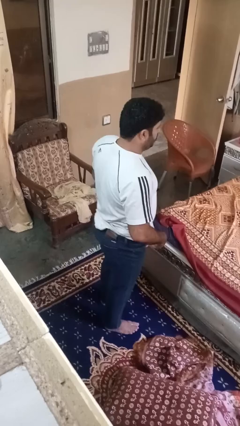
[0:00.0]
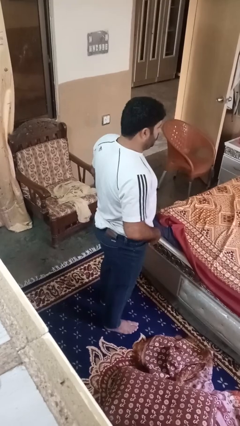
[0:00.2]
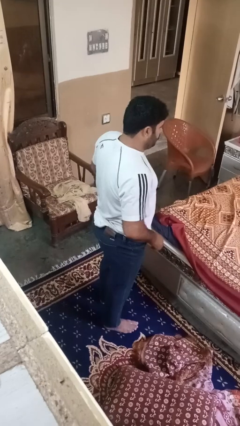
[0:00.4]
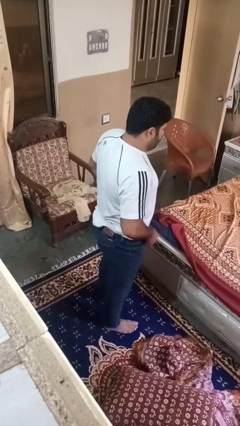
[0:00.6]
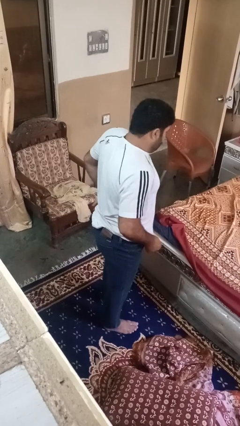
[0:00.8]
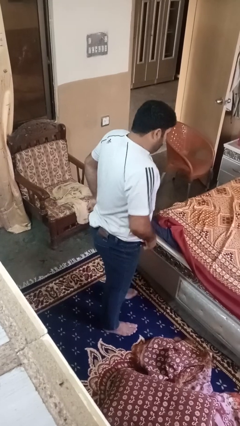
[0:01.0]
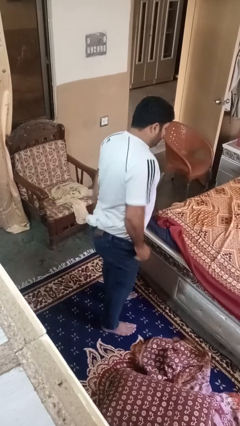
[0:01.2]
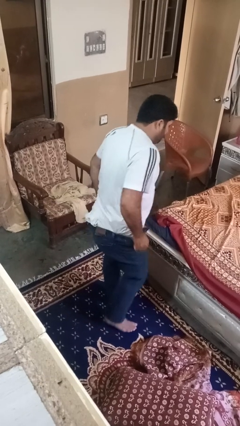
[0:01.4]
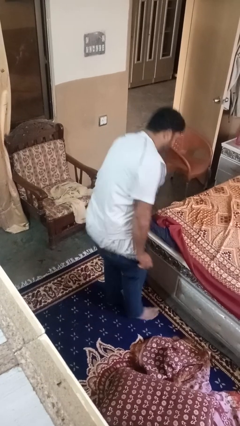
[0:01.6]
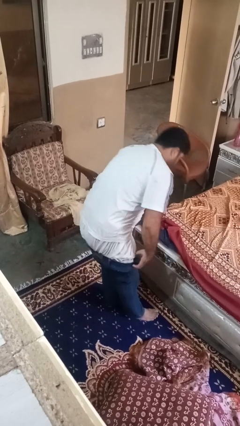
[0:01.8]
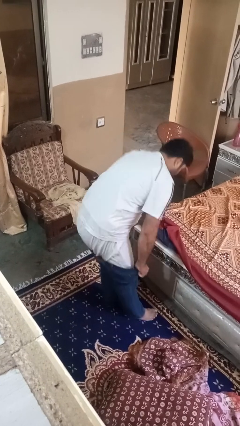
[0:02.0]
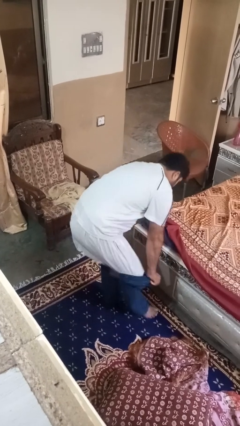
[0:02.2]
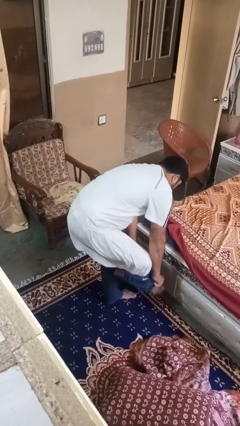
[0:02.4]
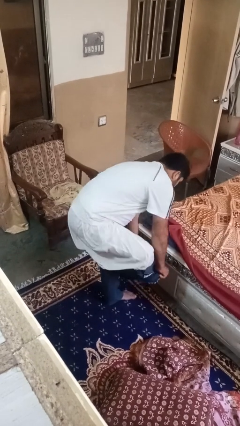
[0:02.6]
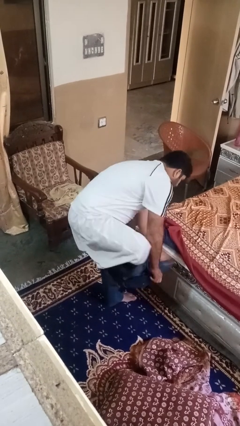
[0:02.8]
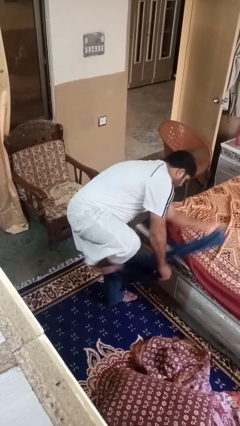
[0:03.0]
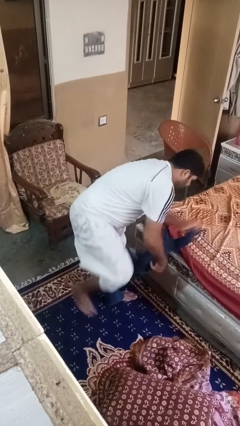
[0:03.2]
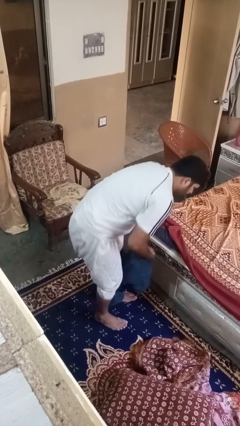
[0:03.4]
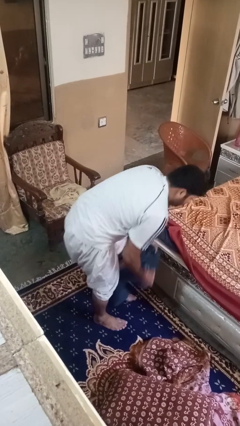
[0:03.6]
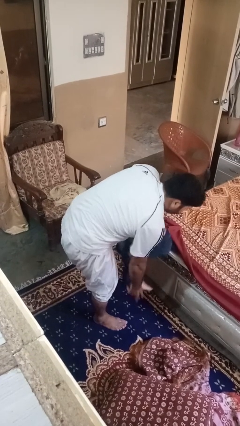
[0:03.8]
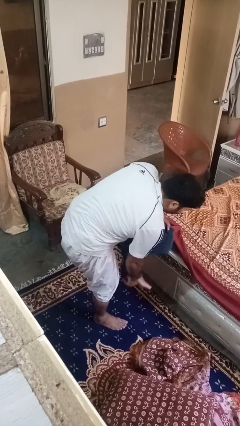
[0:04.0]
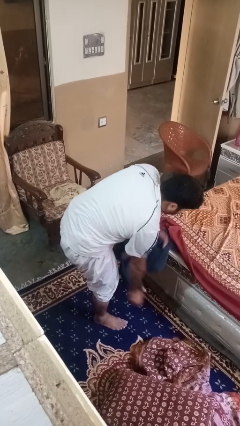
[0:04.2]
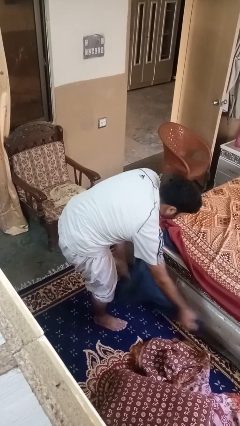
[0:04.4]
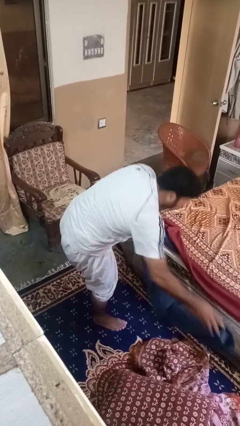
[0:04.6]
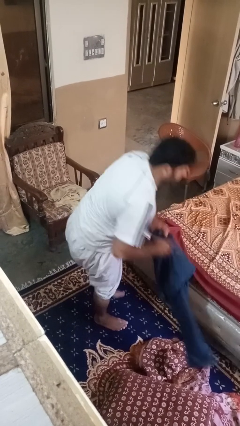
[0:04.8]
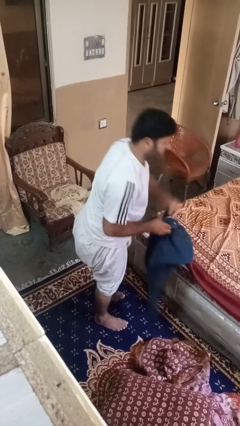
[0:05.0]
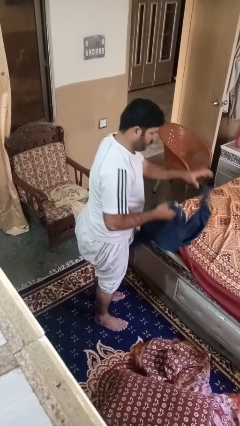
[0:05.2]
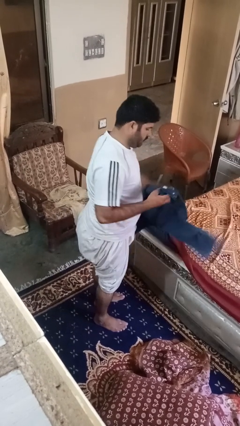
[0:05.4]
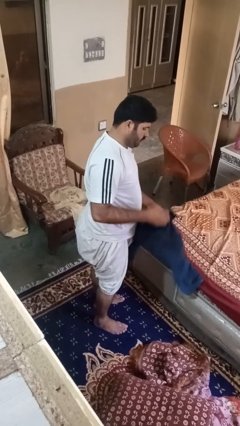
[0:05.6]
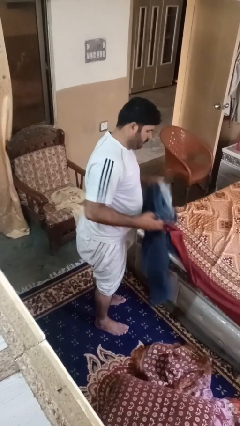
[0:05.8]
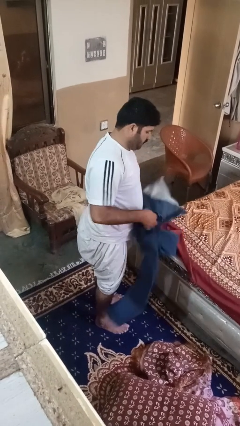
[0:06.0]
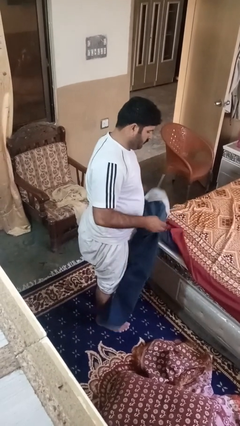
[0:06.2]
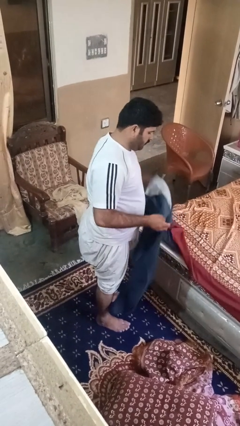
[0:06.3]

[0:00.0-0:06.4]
person takes off pants

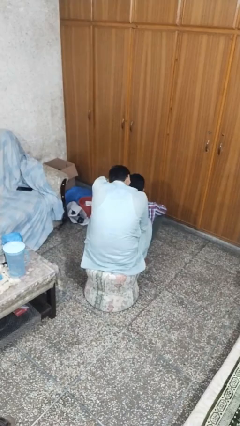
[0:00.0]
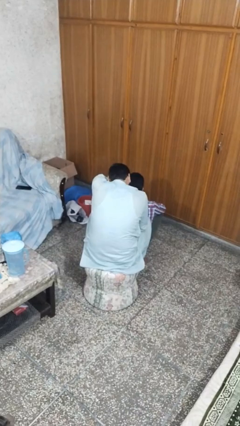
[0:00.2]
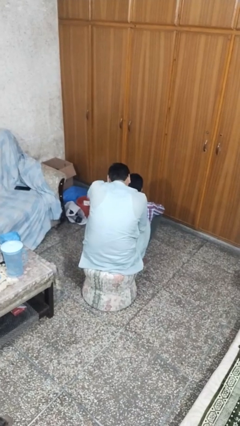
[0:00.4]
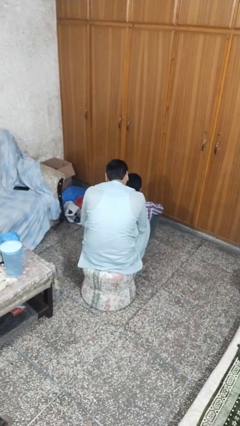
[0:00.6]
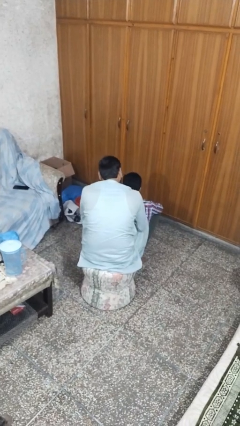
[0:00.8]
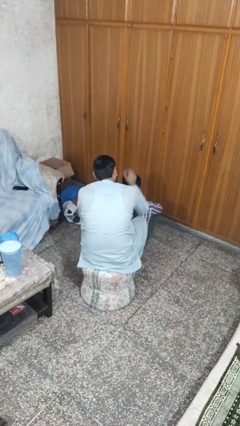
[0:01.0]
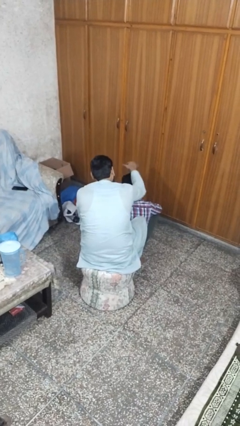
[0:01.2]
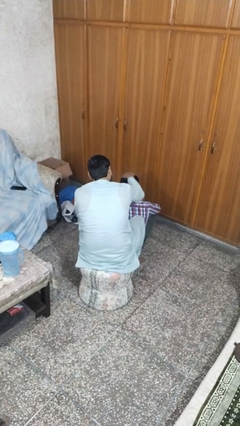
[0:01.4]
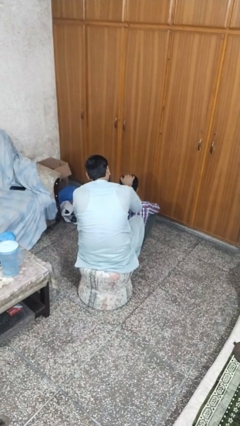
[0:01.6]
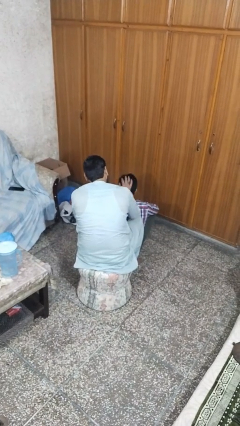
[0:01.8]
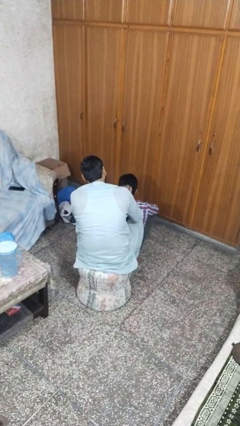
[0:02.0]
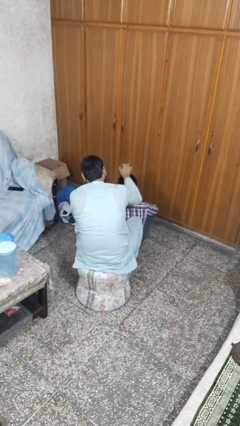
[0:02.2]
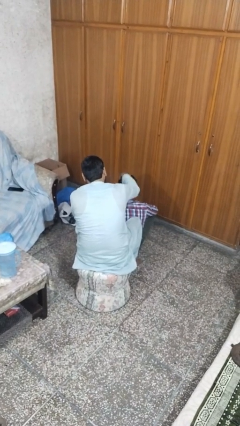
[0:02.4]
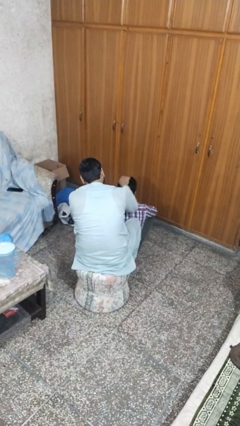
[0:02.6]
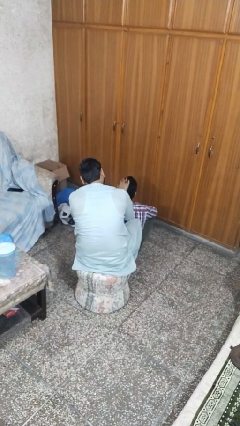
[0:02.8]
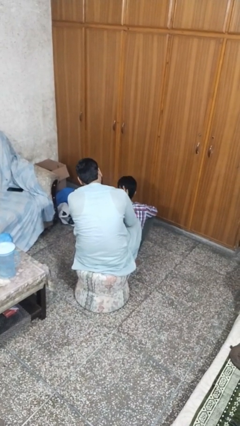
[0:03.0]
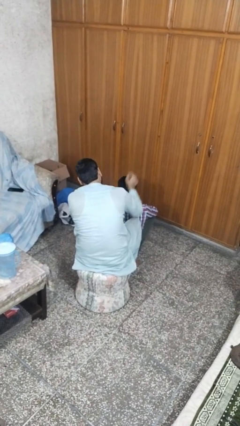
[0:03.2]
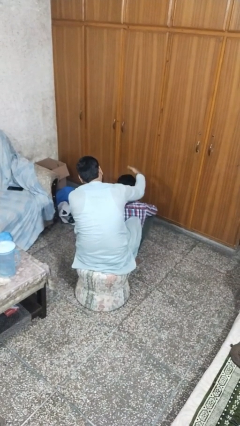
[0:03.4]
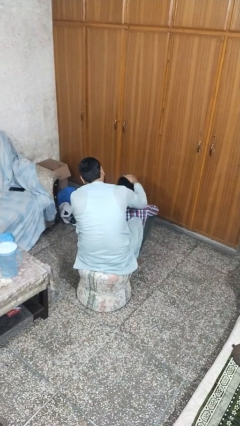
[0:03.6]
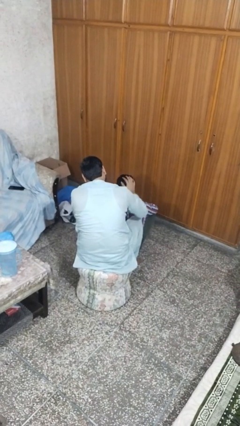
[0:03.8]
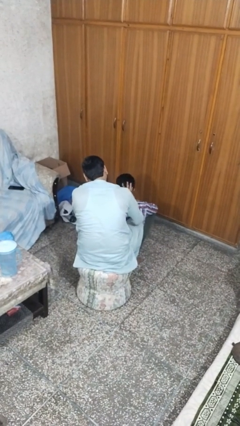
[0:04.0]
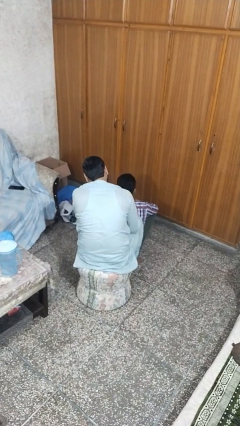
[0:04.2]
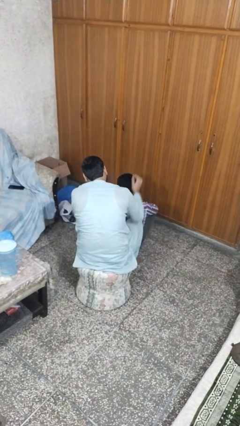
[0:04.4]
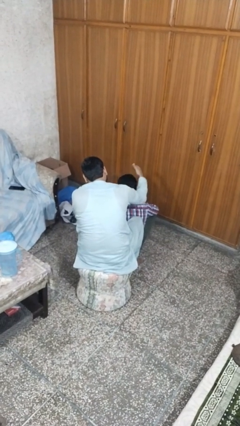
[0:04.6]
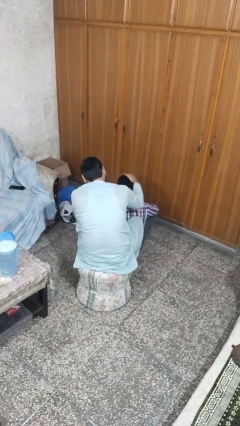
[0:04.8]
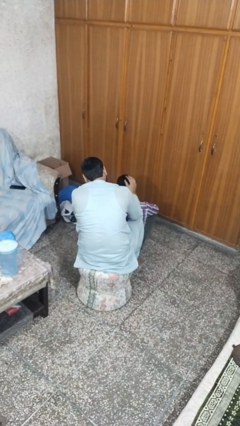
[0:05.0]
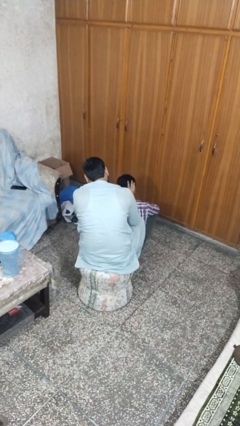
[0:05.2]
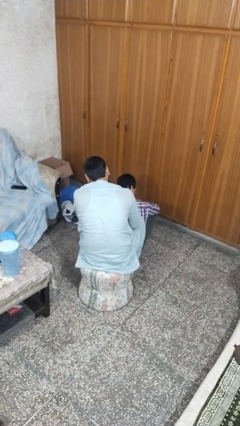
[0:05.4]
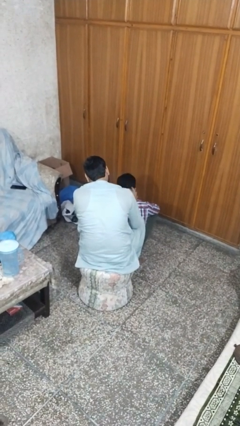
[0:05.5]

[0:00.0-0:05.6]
person braids hair of person

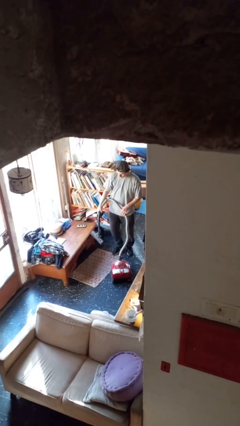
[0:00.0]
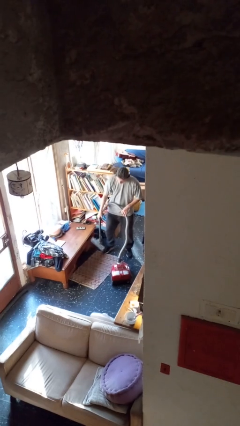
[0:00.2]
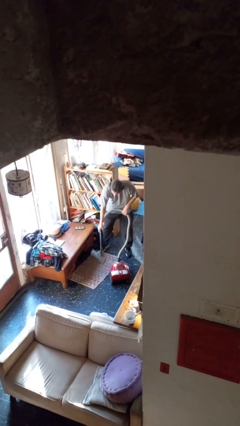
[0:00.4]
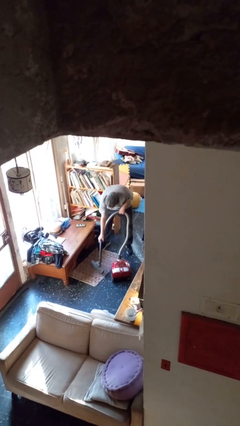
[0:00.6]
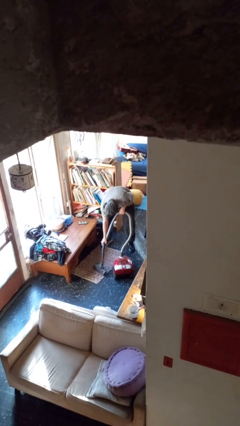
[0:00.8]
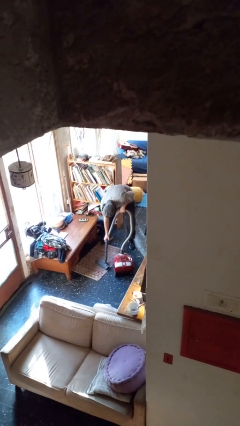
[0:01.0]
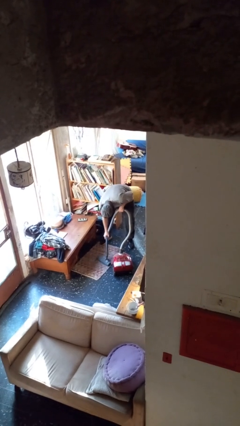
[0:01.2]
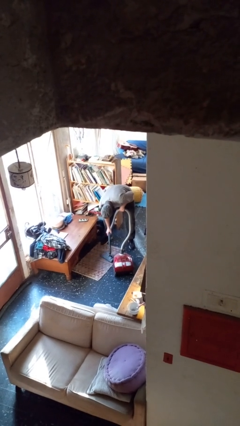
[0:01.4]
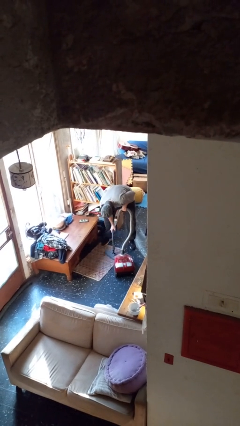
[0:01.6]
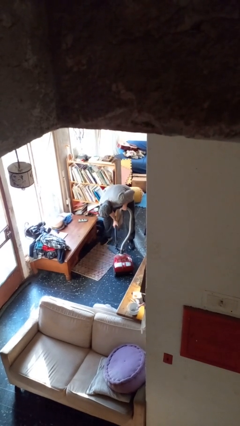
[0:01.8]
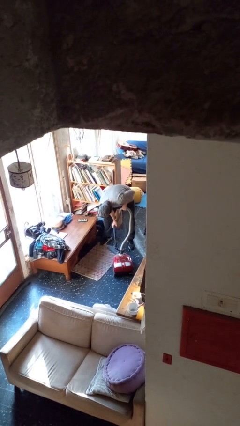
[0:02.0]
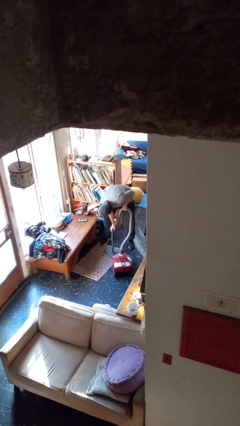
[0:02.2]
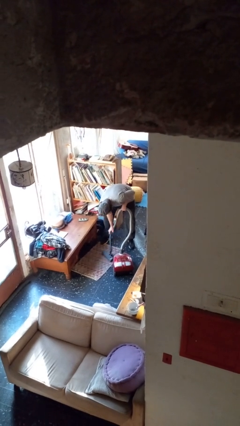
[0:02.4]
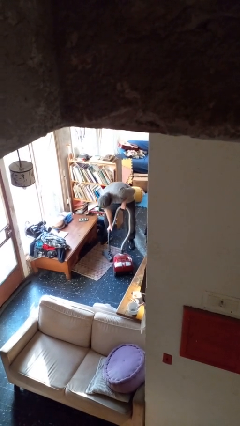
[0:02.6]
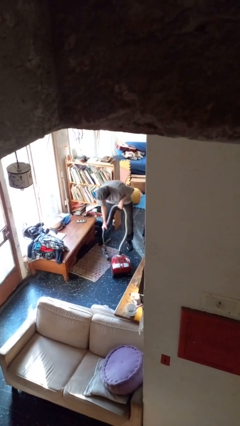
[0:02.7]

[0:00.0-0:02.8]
person vacuums carpet

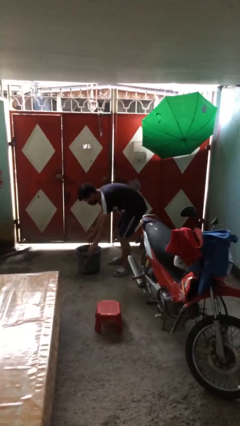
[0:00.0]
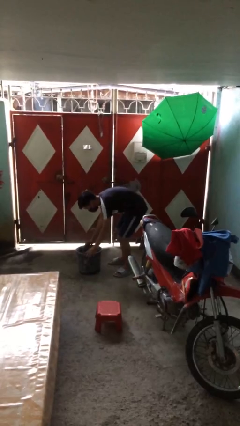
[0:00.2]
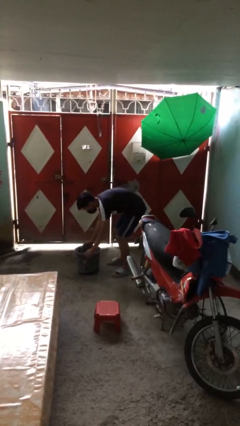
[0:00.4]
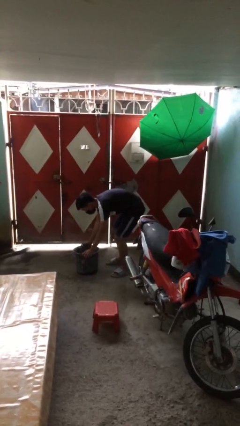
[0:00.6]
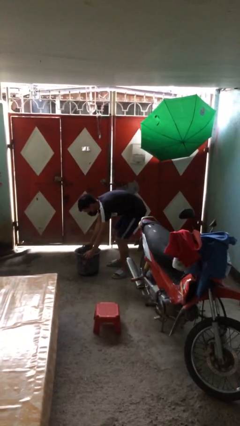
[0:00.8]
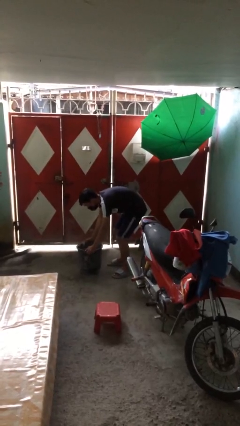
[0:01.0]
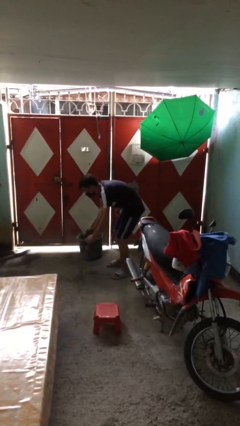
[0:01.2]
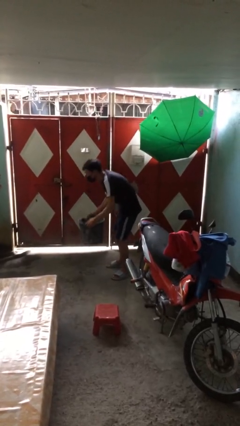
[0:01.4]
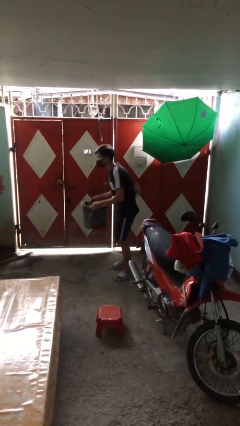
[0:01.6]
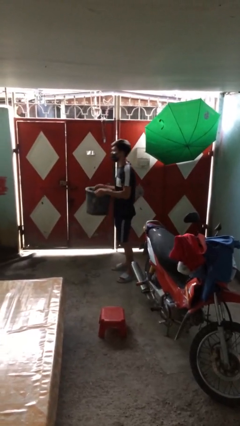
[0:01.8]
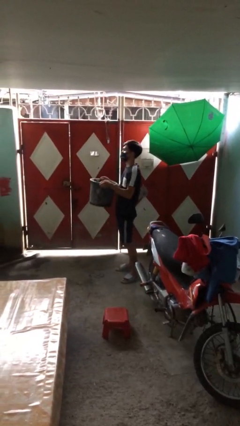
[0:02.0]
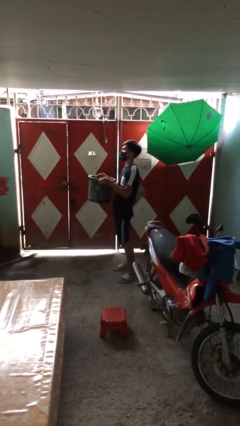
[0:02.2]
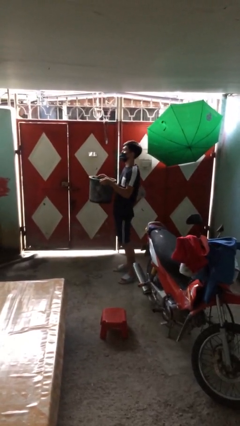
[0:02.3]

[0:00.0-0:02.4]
person picks up object from floor

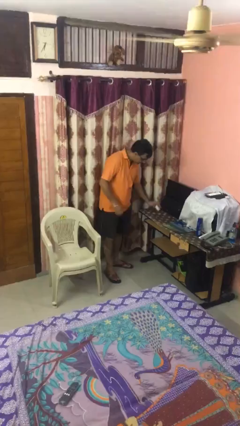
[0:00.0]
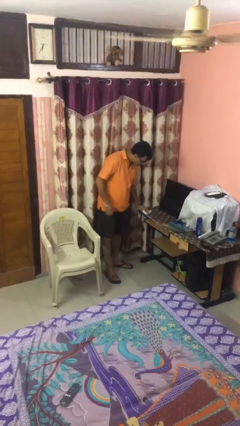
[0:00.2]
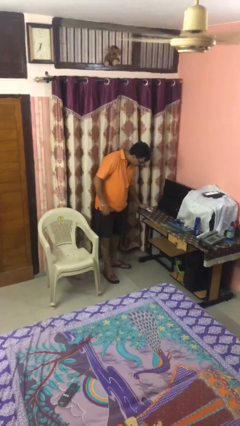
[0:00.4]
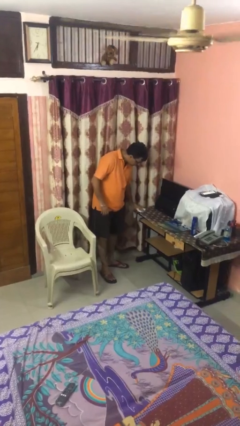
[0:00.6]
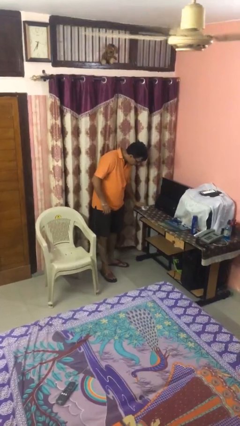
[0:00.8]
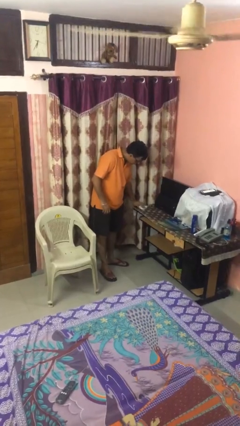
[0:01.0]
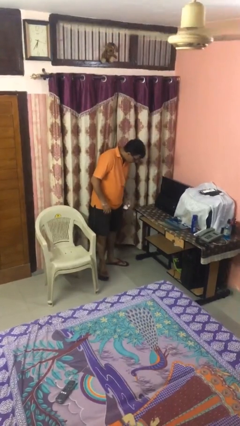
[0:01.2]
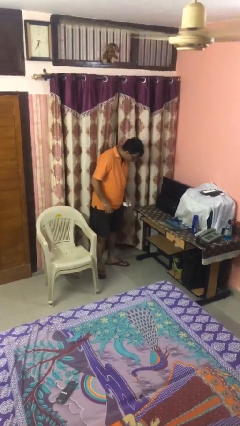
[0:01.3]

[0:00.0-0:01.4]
person cleans table with rag
